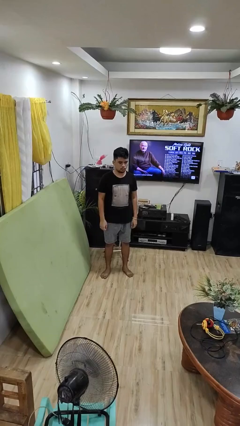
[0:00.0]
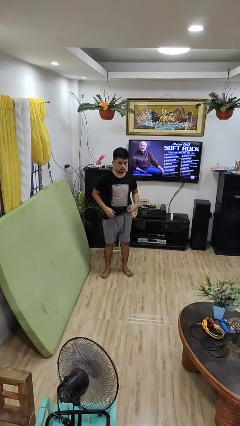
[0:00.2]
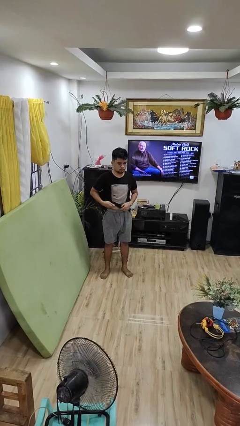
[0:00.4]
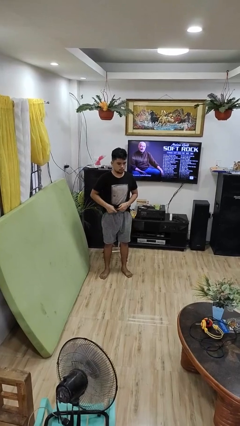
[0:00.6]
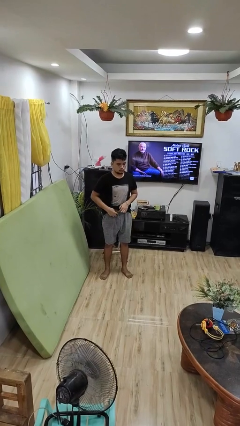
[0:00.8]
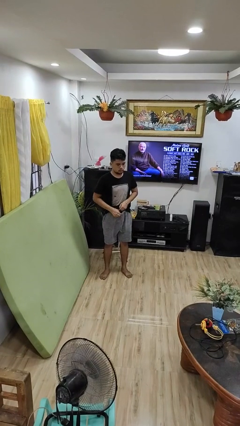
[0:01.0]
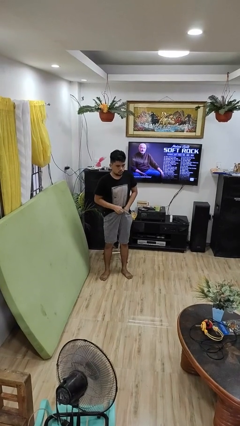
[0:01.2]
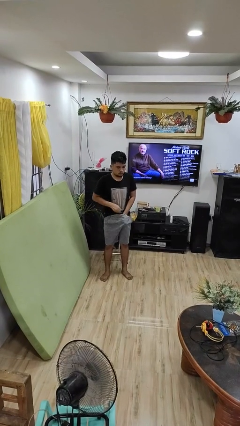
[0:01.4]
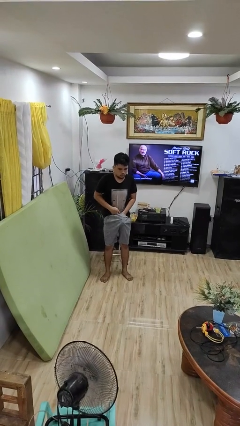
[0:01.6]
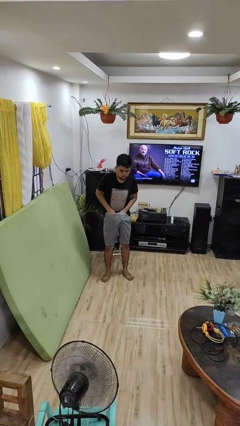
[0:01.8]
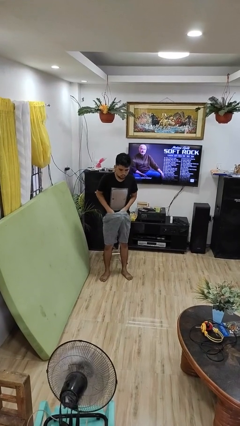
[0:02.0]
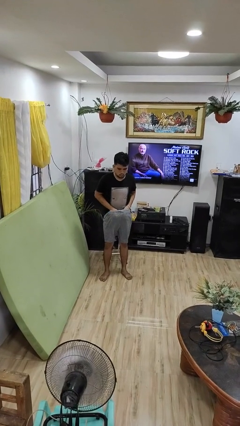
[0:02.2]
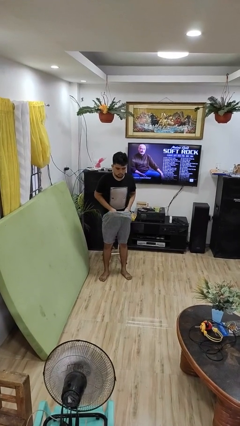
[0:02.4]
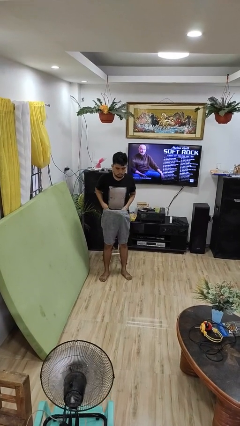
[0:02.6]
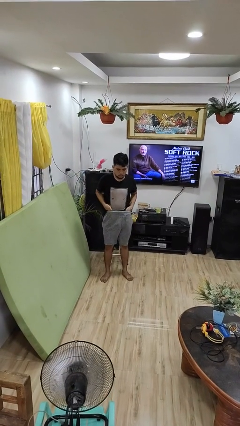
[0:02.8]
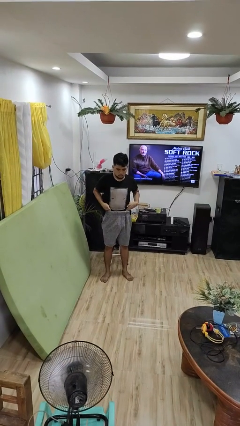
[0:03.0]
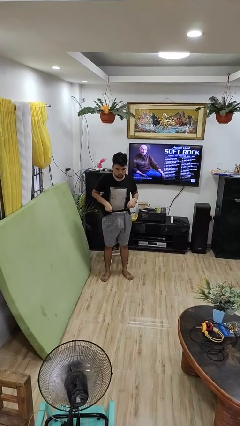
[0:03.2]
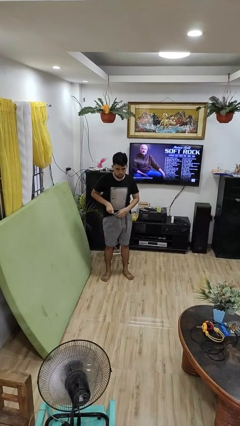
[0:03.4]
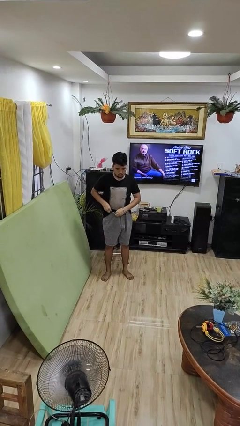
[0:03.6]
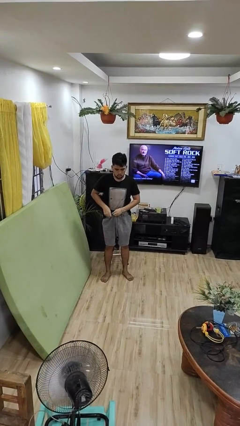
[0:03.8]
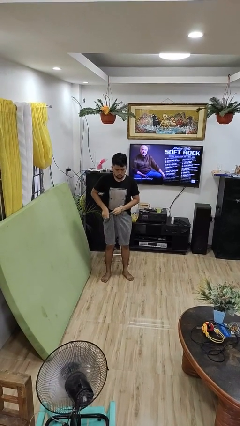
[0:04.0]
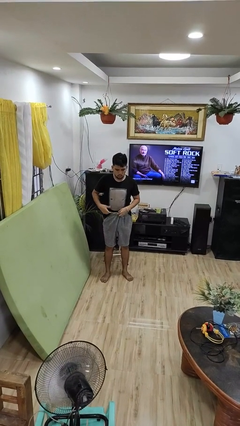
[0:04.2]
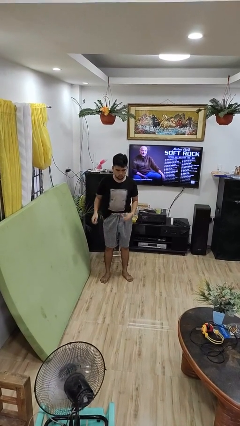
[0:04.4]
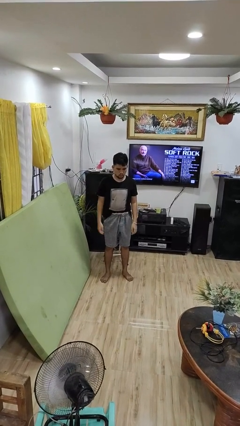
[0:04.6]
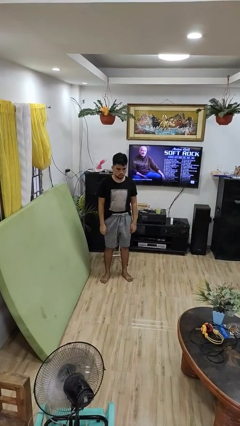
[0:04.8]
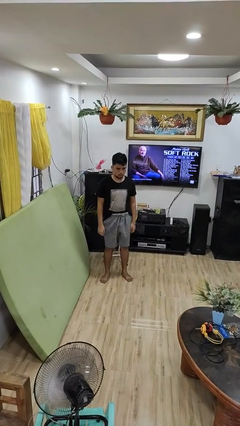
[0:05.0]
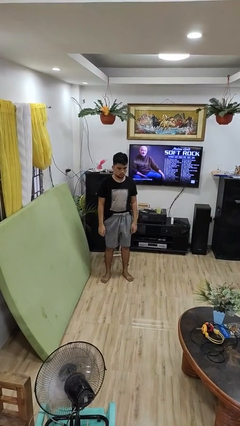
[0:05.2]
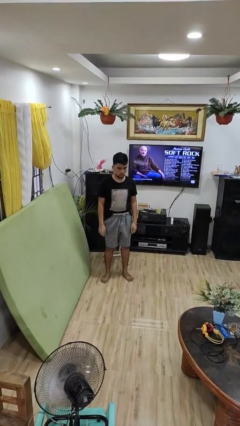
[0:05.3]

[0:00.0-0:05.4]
person tucks in shirt

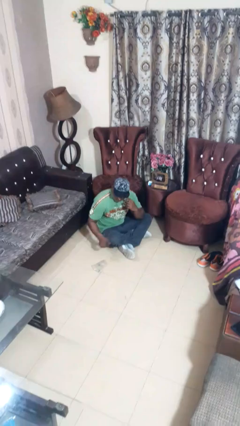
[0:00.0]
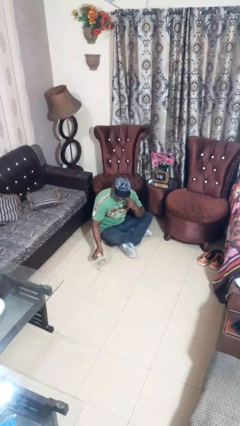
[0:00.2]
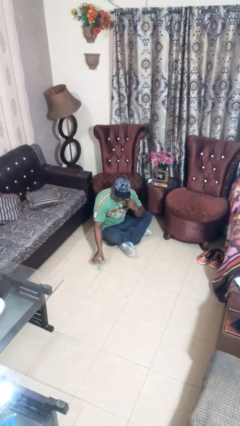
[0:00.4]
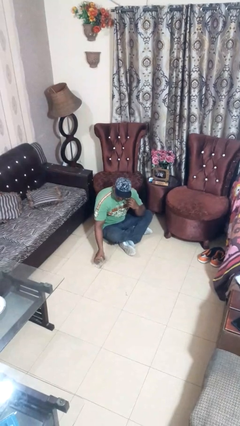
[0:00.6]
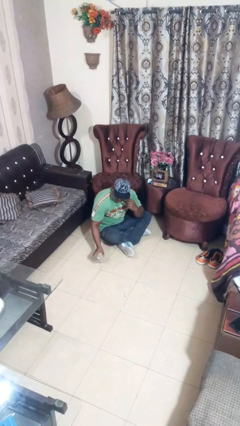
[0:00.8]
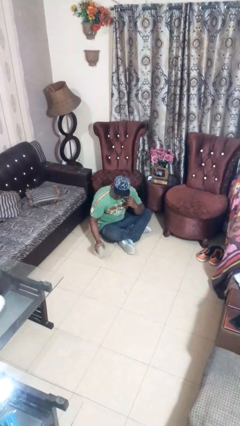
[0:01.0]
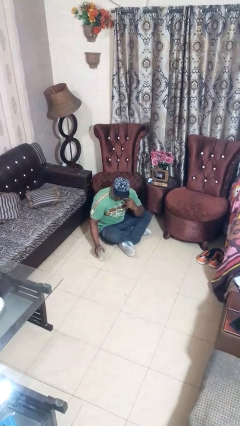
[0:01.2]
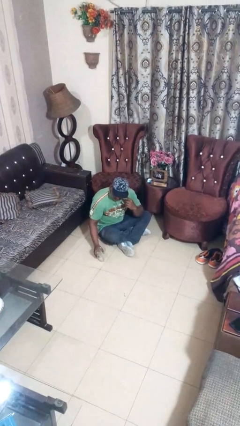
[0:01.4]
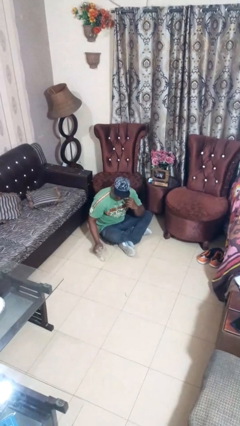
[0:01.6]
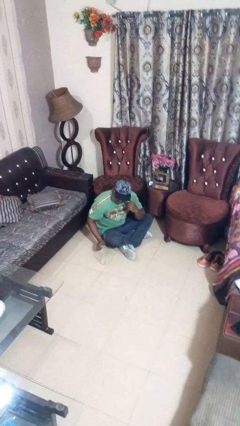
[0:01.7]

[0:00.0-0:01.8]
person sets upright glass

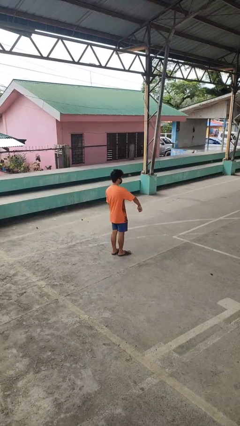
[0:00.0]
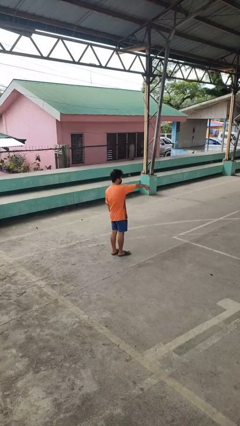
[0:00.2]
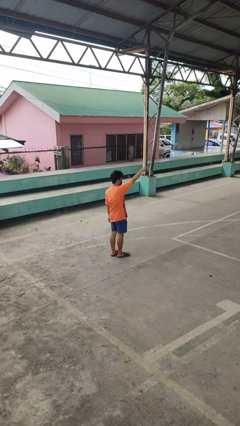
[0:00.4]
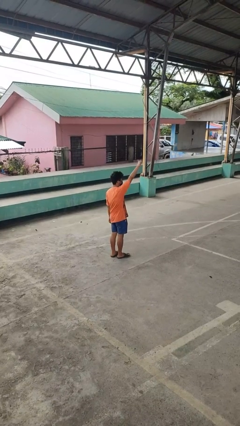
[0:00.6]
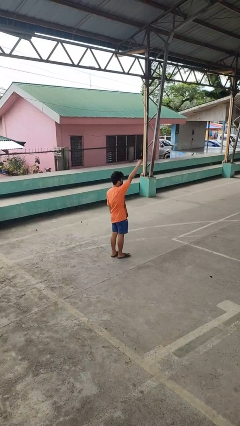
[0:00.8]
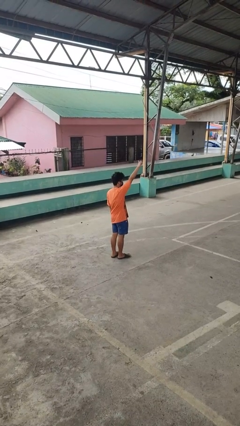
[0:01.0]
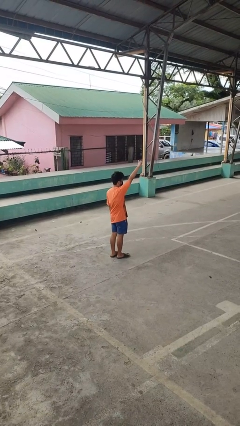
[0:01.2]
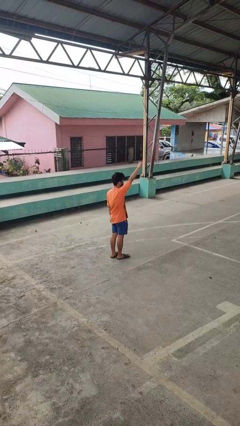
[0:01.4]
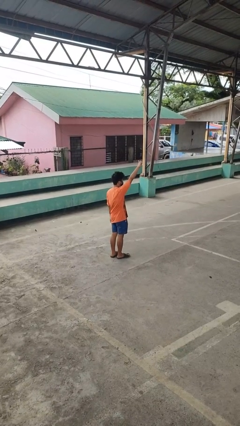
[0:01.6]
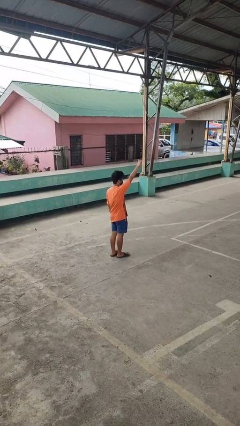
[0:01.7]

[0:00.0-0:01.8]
person gestures swipe up

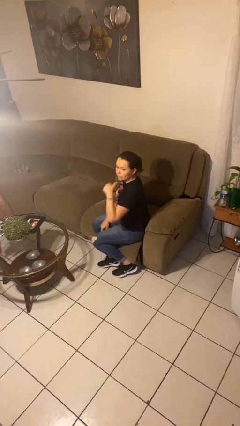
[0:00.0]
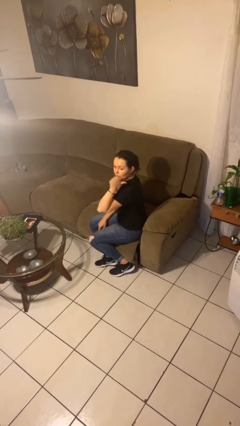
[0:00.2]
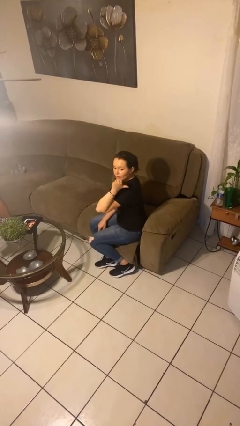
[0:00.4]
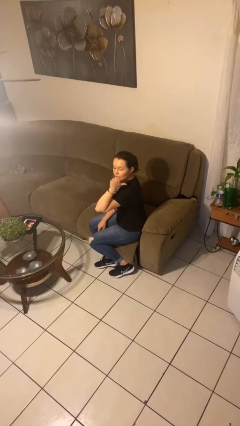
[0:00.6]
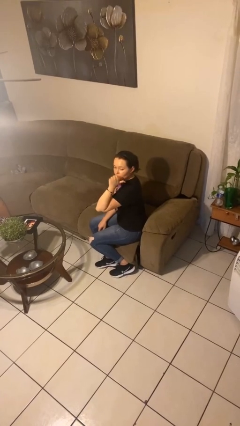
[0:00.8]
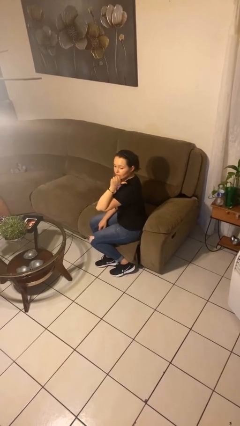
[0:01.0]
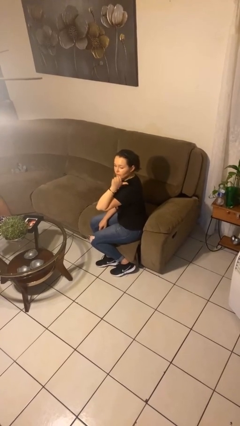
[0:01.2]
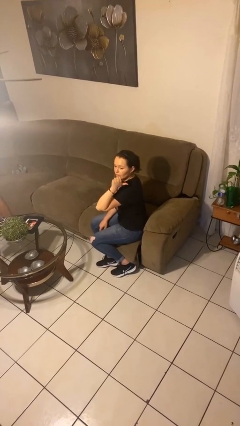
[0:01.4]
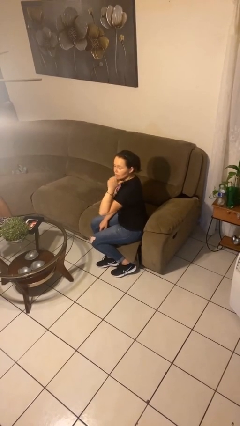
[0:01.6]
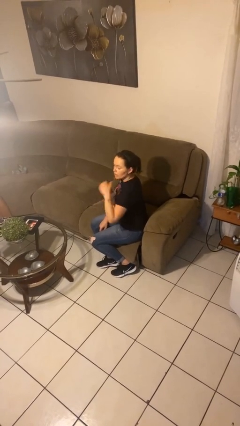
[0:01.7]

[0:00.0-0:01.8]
person gestures behind me

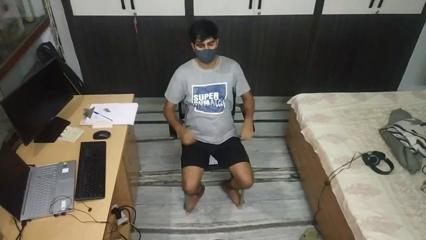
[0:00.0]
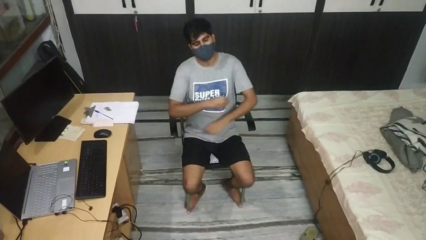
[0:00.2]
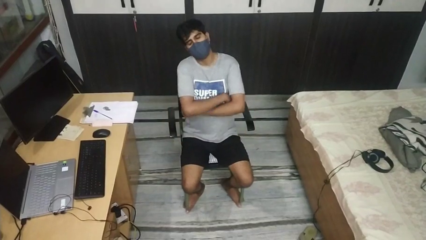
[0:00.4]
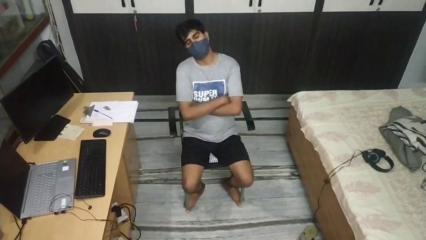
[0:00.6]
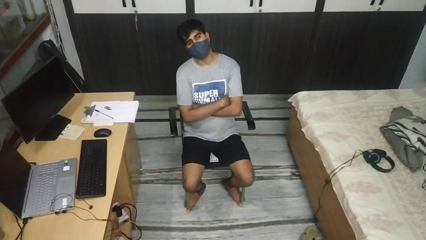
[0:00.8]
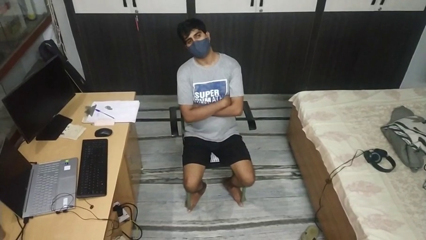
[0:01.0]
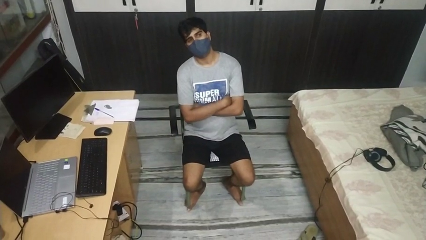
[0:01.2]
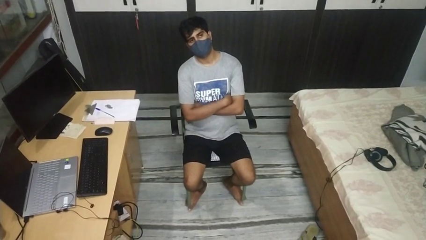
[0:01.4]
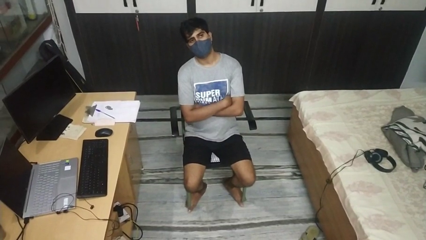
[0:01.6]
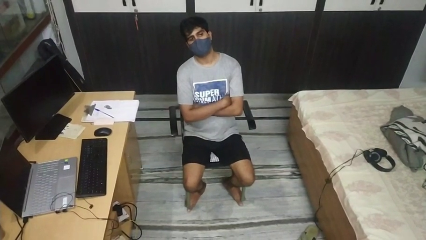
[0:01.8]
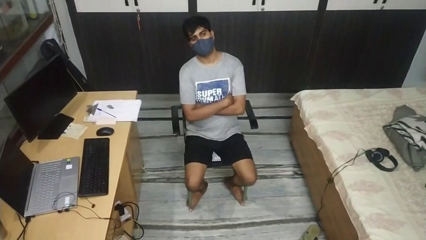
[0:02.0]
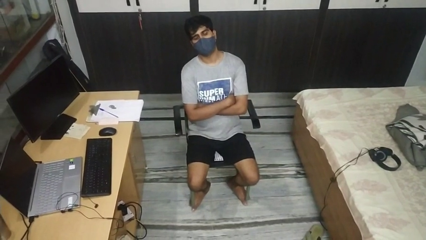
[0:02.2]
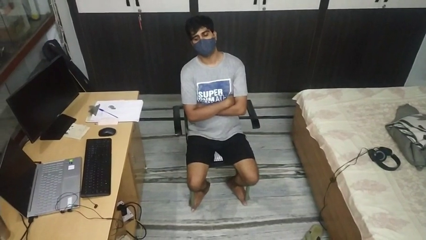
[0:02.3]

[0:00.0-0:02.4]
person crosses arms

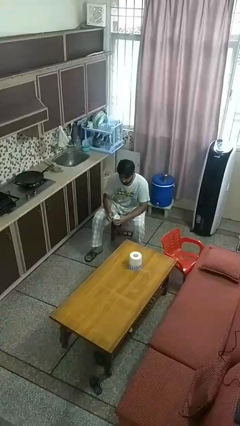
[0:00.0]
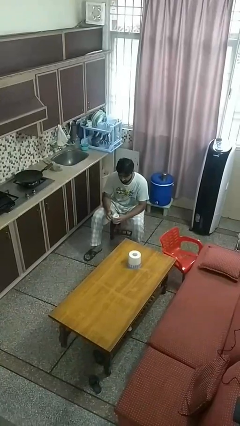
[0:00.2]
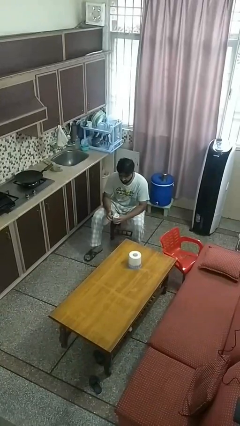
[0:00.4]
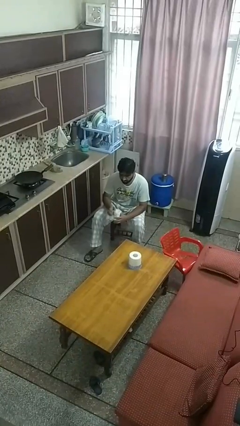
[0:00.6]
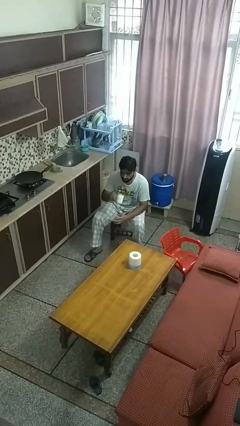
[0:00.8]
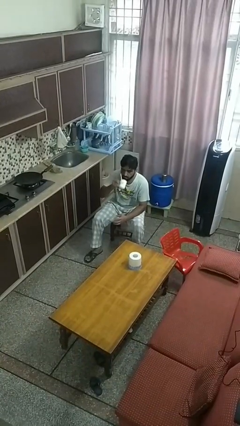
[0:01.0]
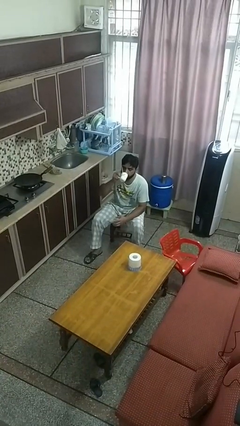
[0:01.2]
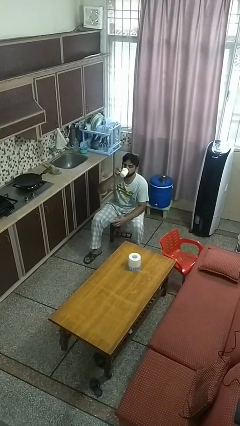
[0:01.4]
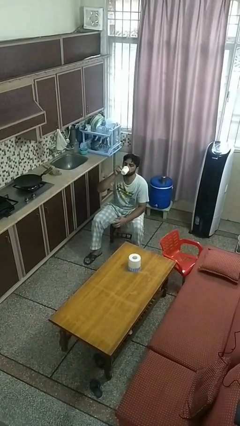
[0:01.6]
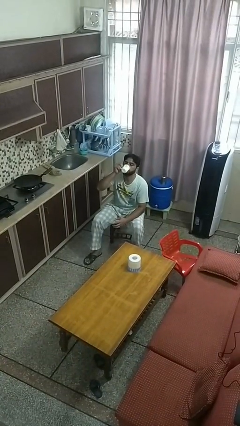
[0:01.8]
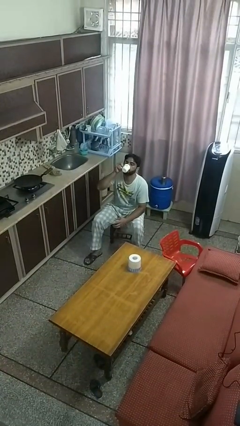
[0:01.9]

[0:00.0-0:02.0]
person drinks from mug

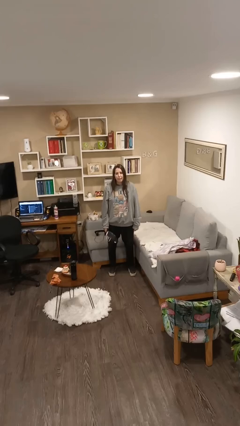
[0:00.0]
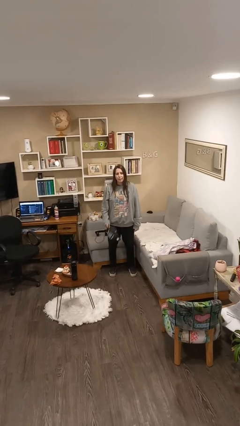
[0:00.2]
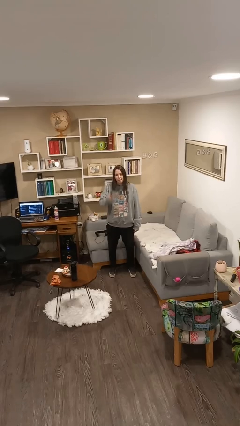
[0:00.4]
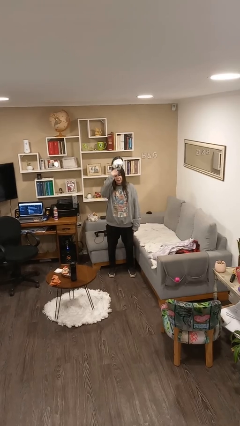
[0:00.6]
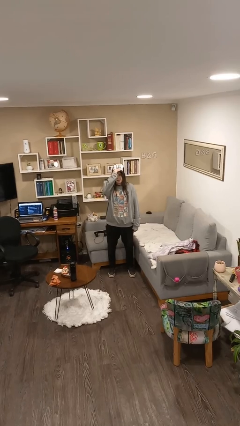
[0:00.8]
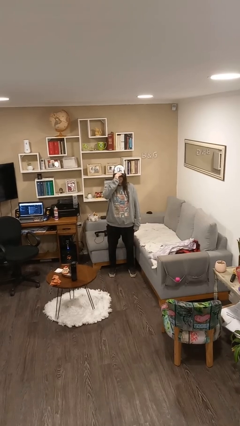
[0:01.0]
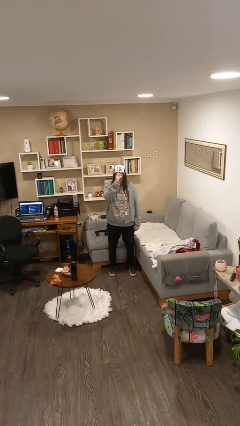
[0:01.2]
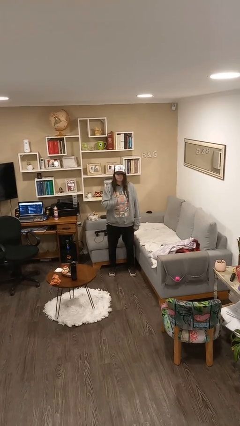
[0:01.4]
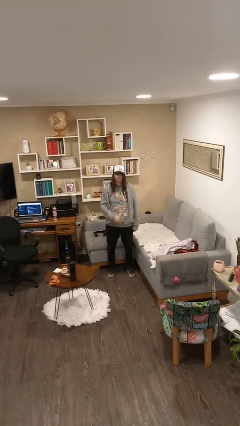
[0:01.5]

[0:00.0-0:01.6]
person puts on hat
